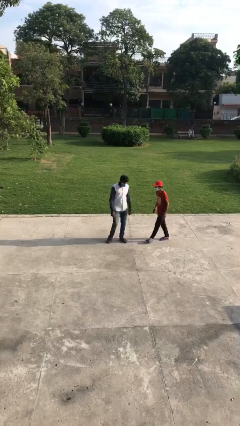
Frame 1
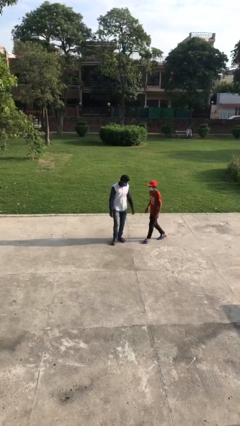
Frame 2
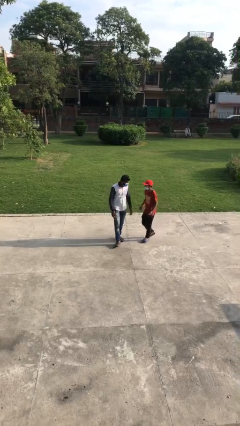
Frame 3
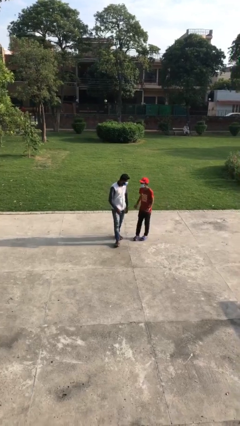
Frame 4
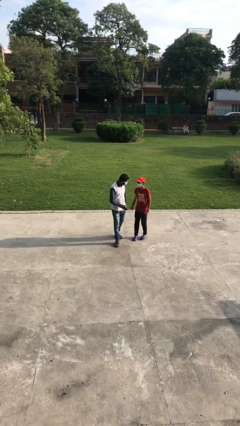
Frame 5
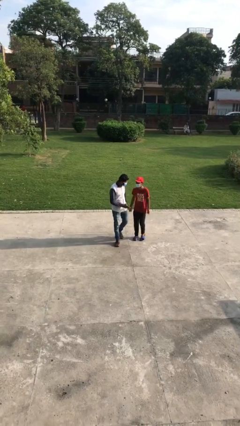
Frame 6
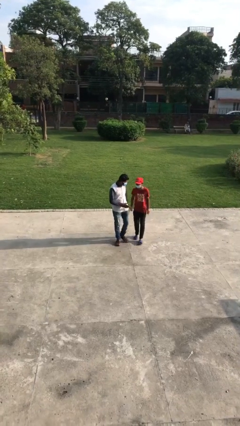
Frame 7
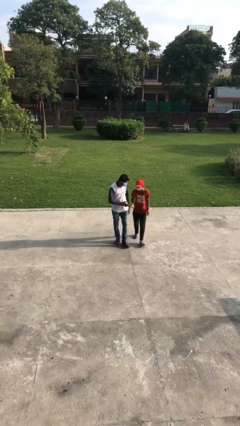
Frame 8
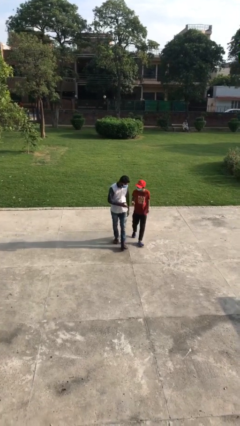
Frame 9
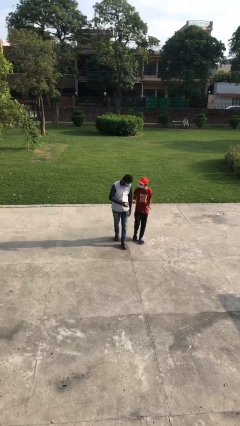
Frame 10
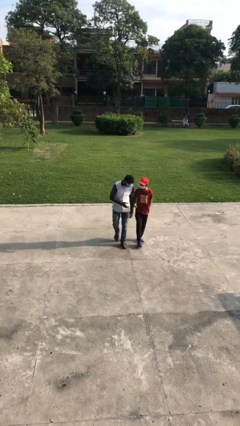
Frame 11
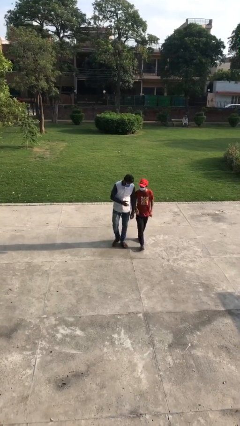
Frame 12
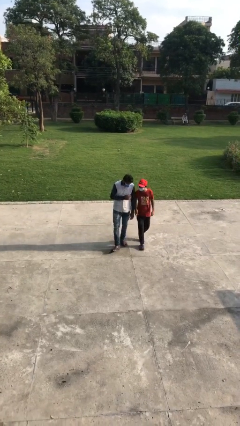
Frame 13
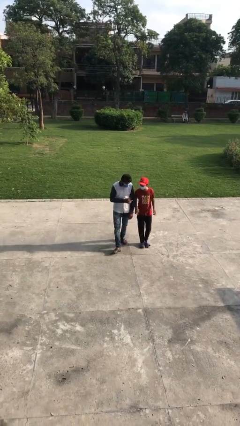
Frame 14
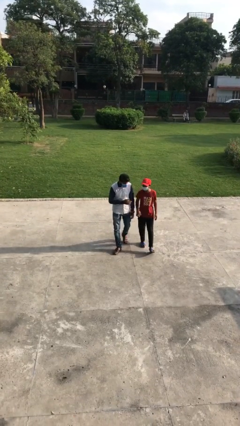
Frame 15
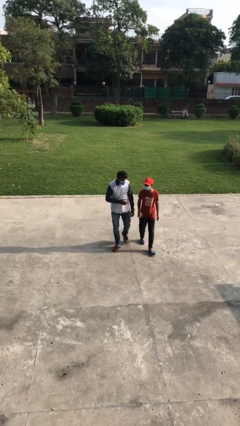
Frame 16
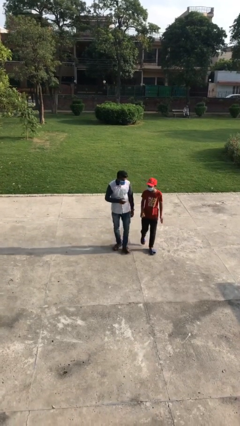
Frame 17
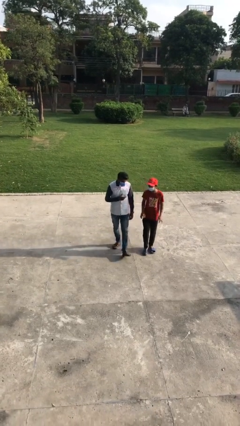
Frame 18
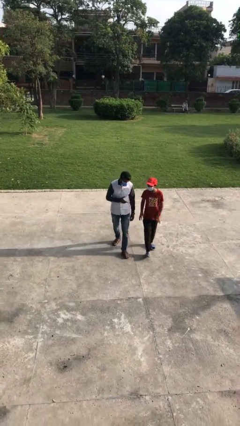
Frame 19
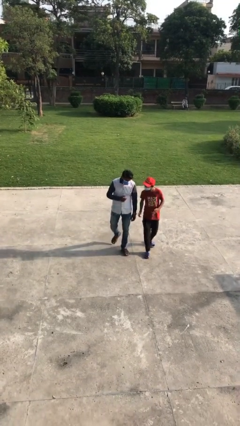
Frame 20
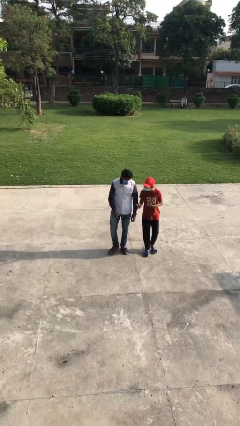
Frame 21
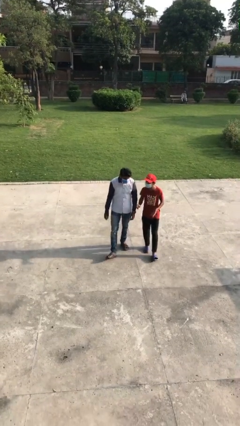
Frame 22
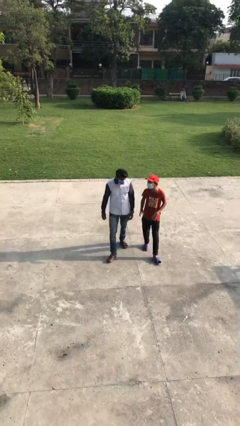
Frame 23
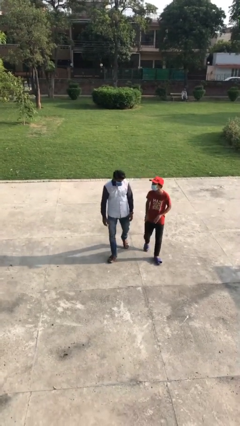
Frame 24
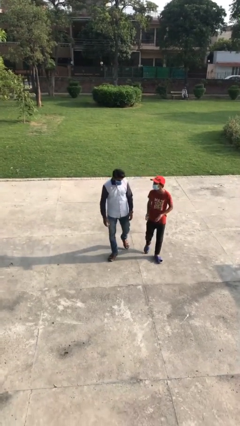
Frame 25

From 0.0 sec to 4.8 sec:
person talks to person

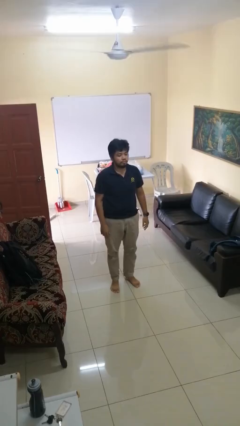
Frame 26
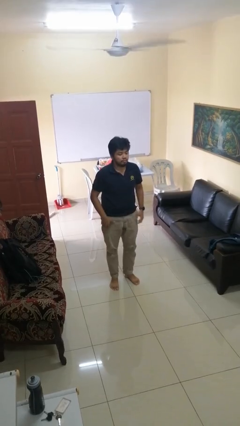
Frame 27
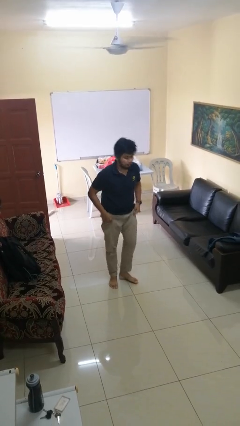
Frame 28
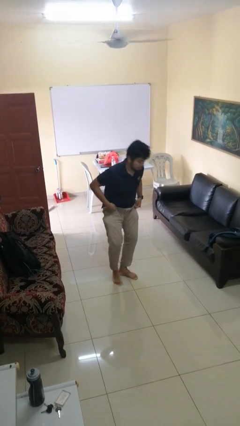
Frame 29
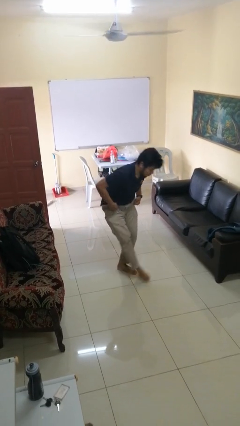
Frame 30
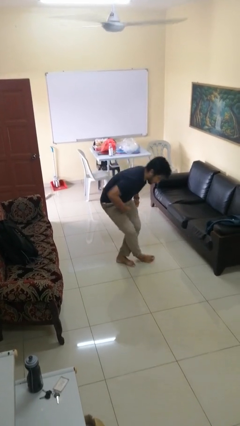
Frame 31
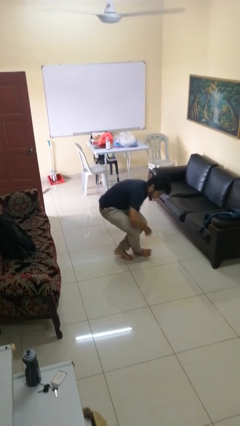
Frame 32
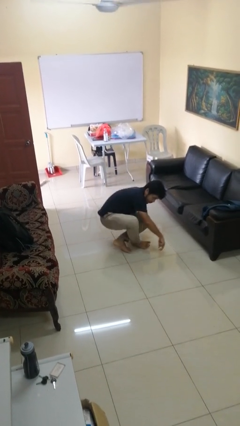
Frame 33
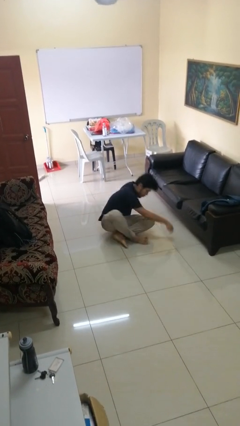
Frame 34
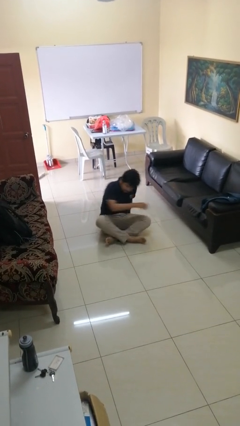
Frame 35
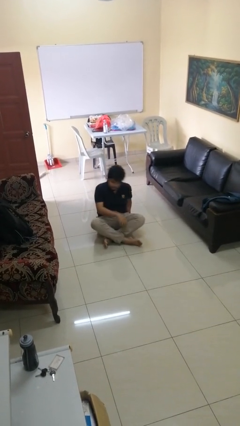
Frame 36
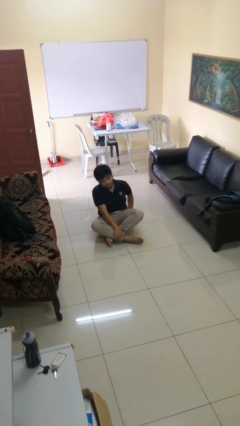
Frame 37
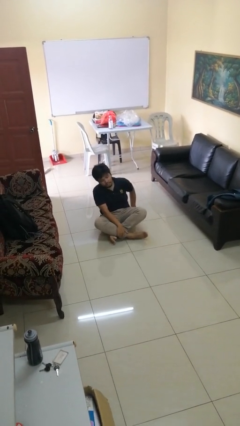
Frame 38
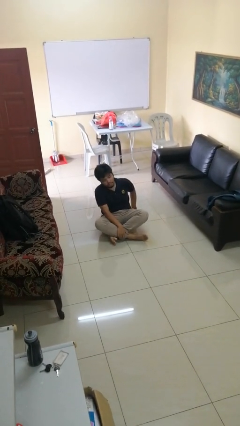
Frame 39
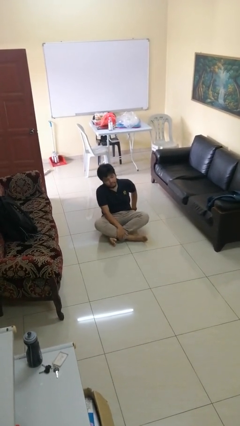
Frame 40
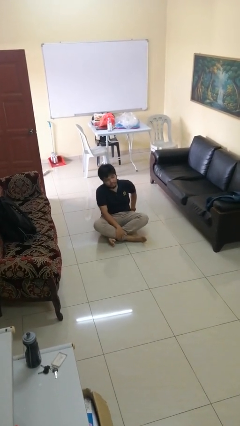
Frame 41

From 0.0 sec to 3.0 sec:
person sits crisscross

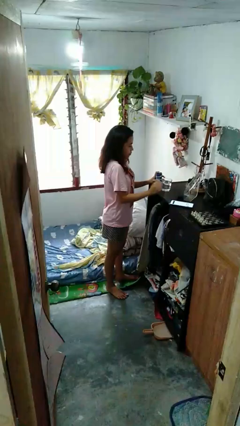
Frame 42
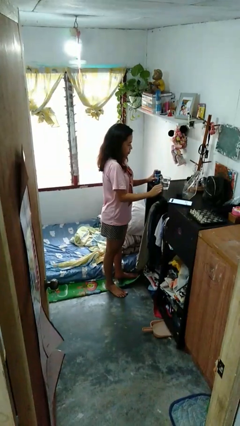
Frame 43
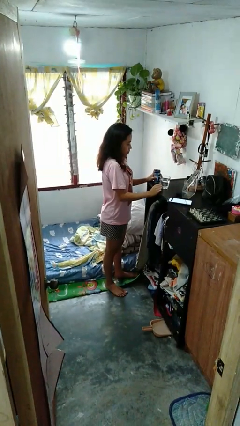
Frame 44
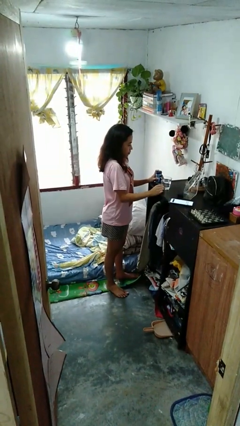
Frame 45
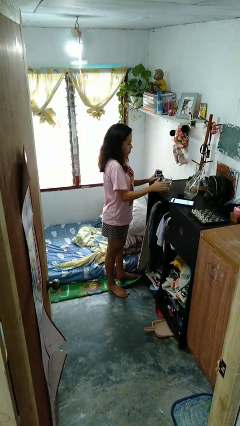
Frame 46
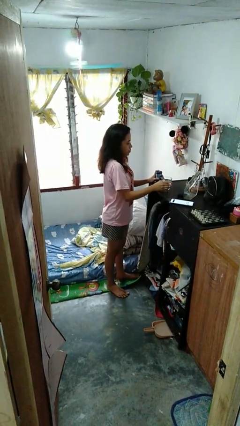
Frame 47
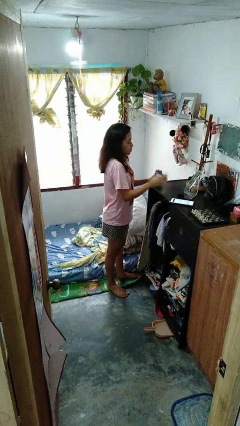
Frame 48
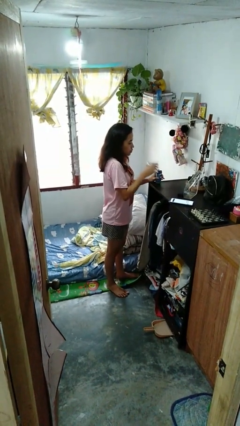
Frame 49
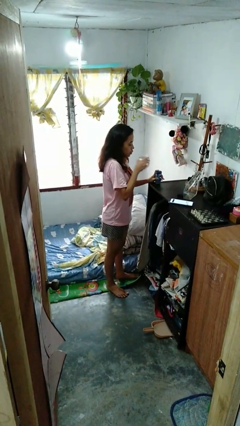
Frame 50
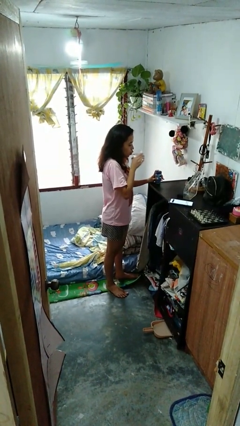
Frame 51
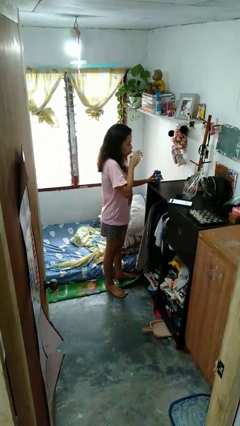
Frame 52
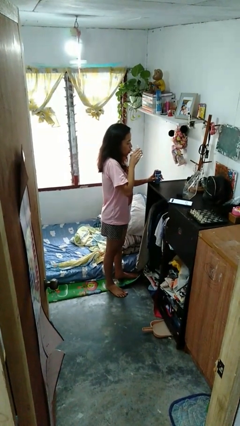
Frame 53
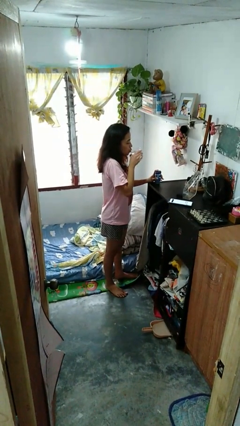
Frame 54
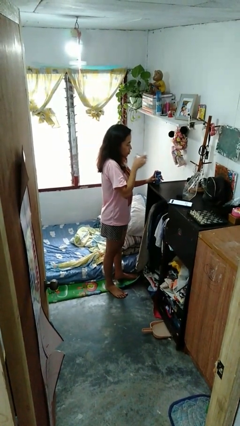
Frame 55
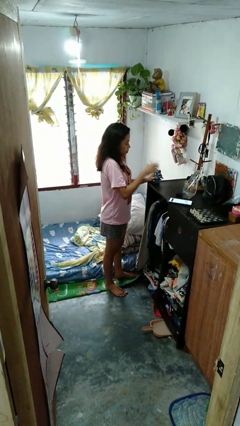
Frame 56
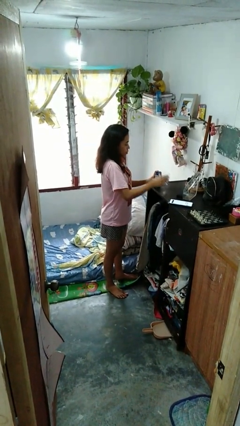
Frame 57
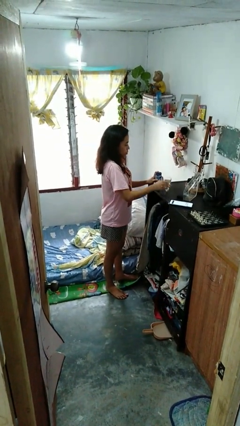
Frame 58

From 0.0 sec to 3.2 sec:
person drinks from cup

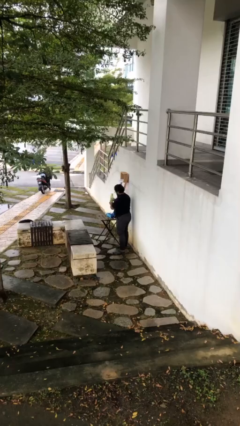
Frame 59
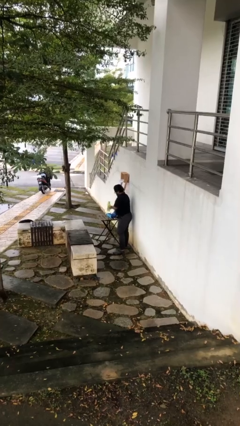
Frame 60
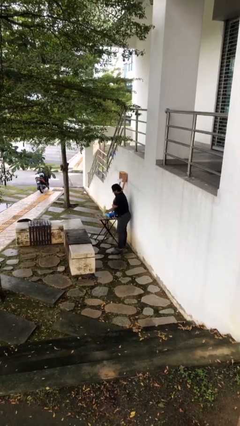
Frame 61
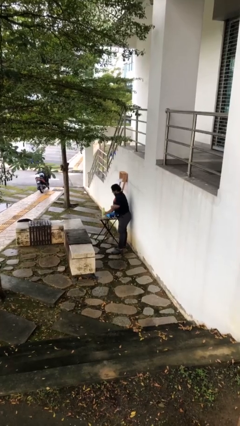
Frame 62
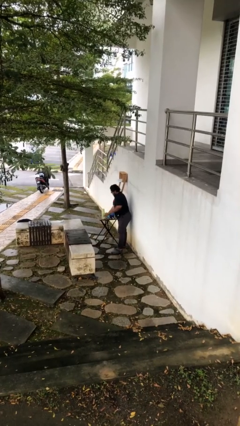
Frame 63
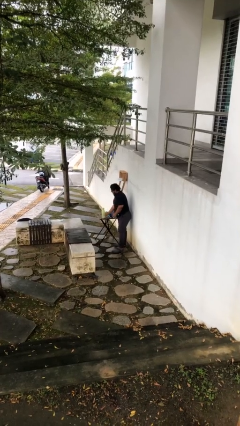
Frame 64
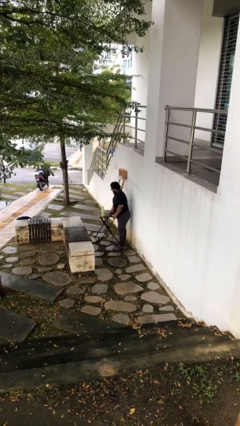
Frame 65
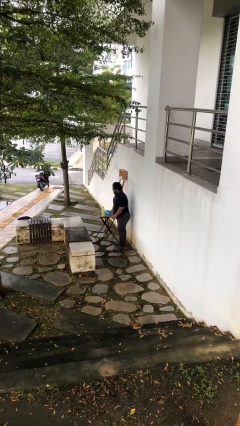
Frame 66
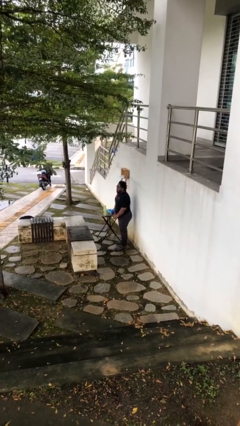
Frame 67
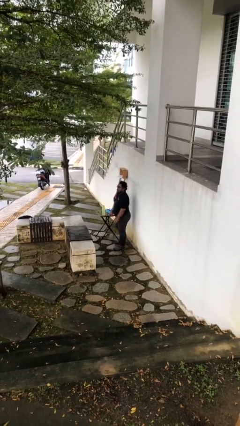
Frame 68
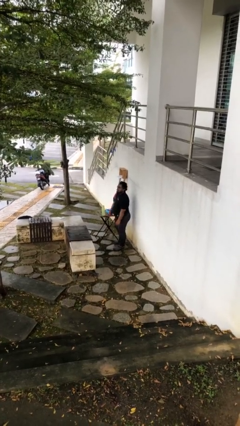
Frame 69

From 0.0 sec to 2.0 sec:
person puts down object on table

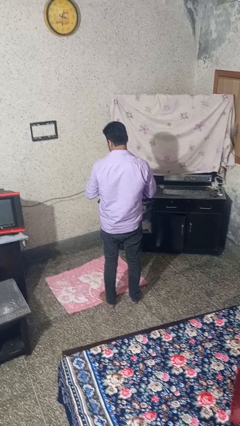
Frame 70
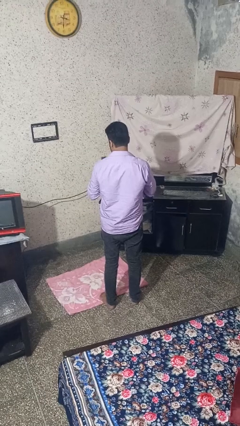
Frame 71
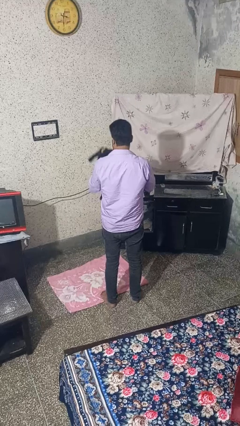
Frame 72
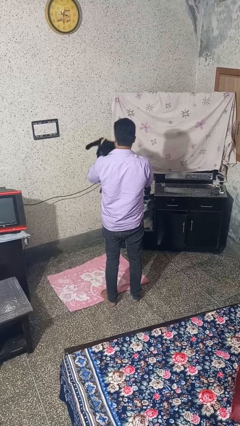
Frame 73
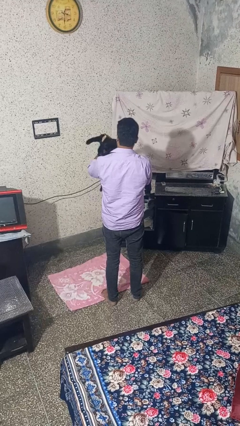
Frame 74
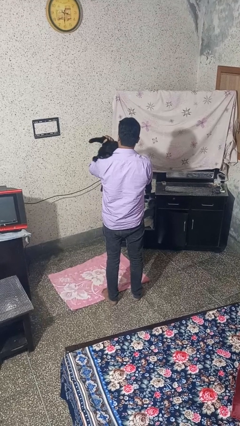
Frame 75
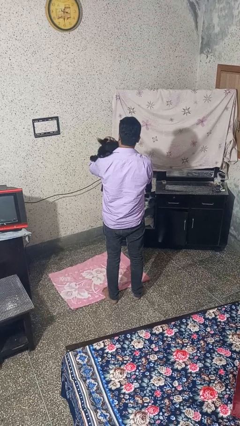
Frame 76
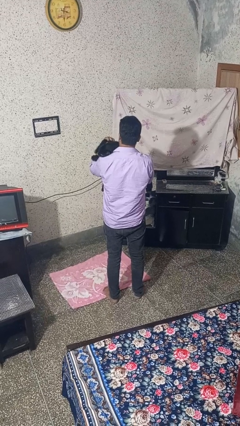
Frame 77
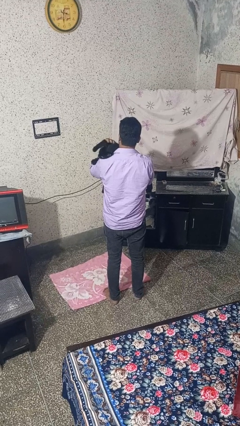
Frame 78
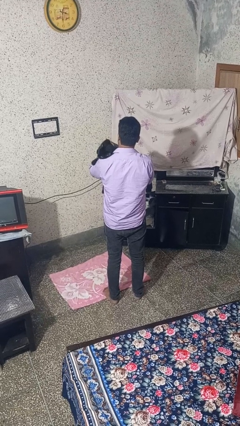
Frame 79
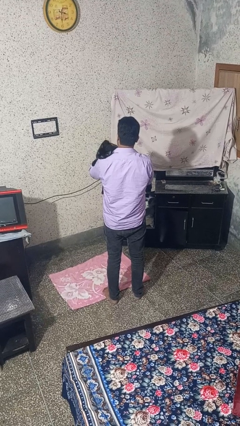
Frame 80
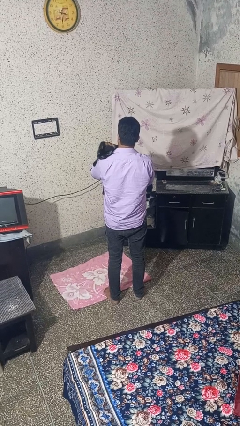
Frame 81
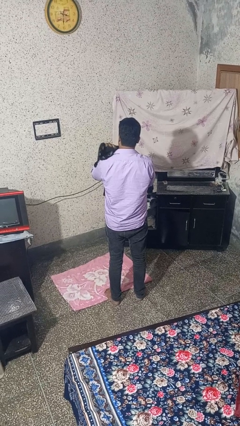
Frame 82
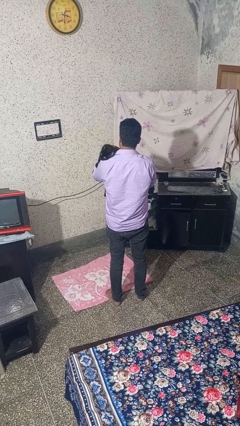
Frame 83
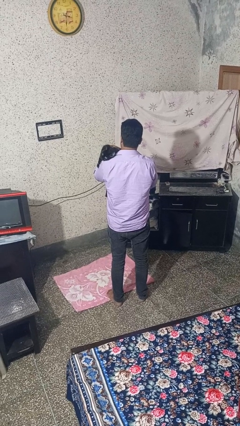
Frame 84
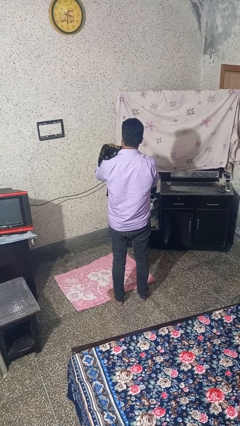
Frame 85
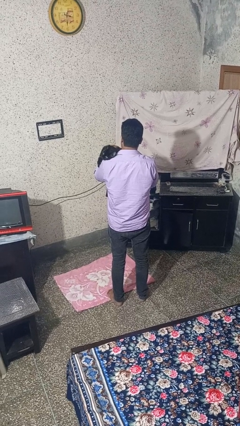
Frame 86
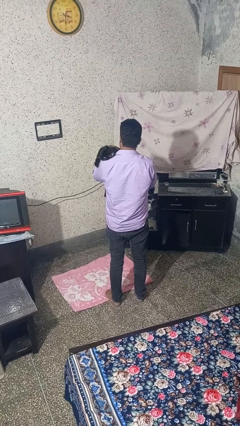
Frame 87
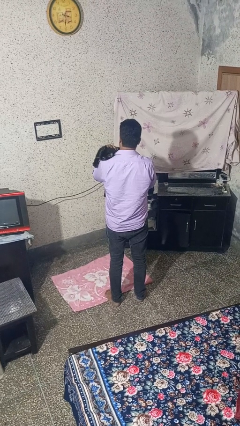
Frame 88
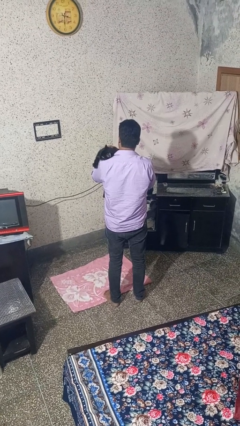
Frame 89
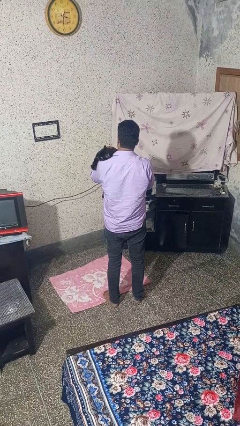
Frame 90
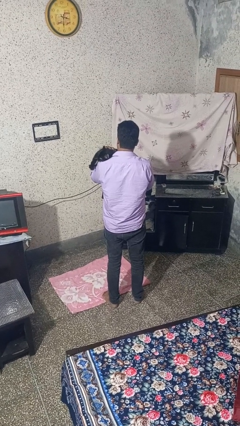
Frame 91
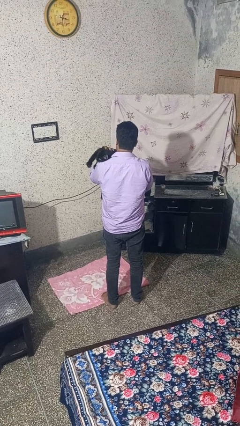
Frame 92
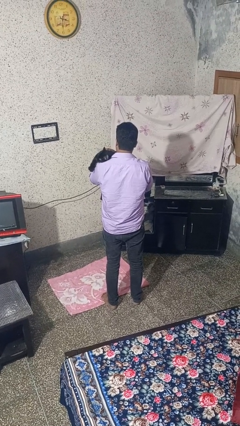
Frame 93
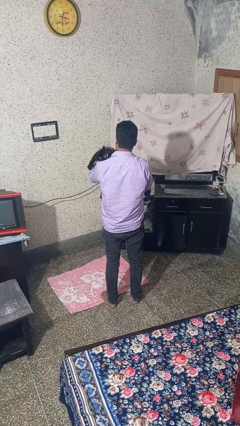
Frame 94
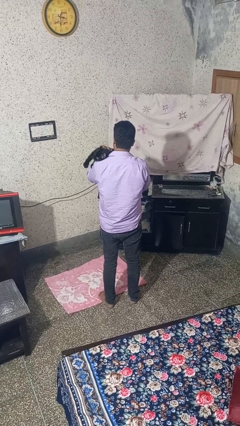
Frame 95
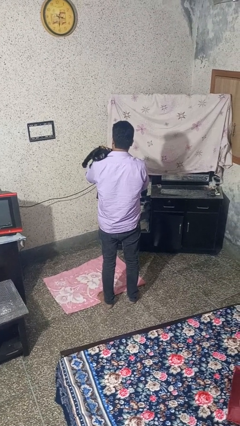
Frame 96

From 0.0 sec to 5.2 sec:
person hugs cat
